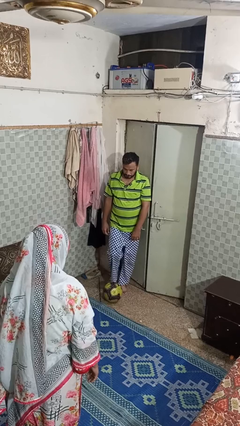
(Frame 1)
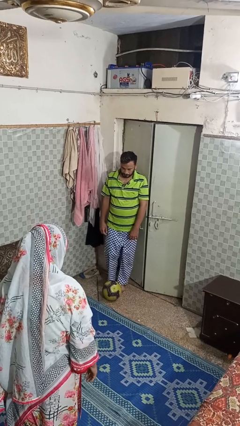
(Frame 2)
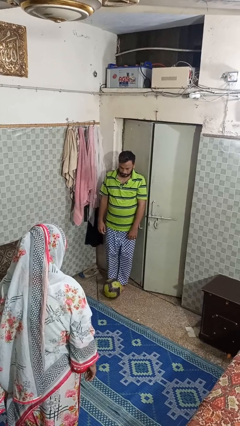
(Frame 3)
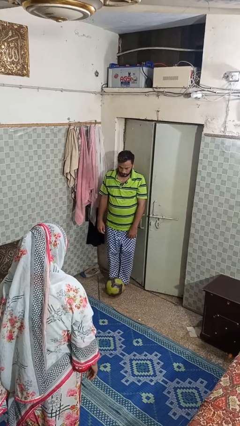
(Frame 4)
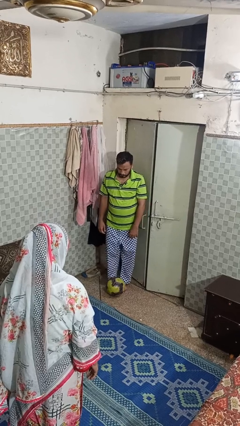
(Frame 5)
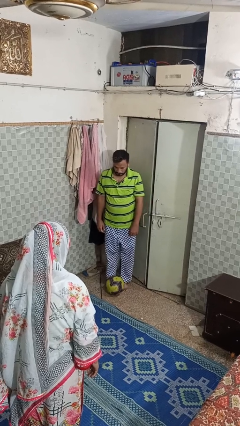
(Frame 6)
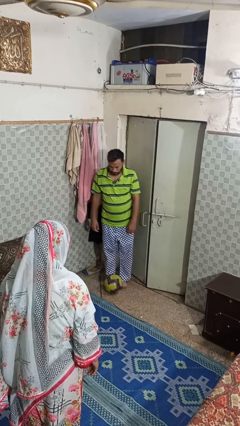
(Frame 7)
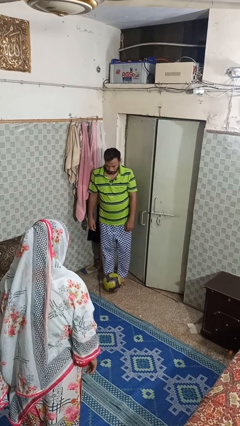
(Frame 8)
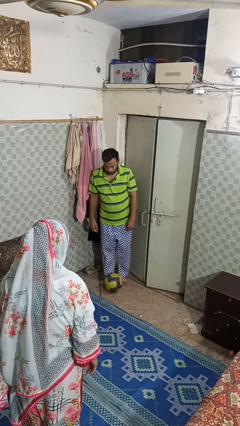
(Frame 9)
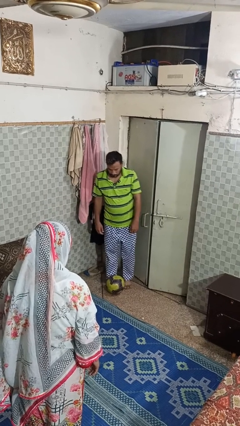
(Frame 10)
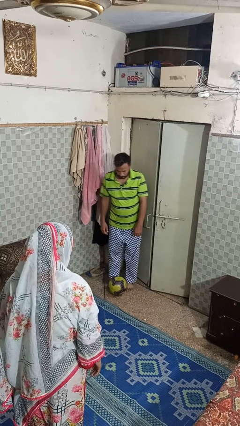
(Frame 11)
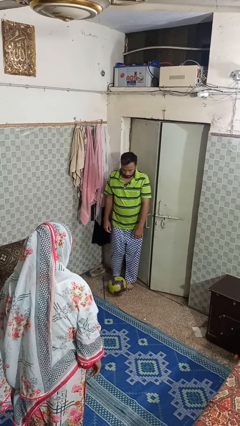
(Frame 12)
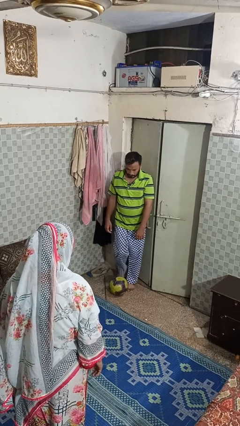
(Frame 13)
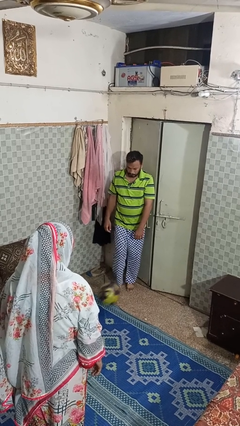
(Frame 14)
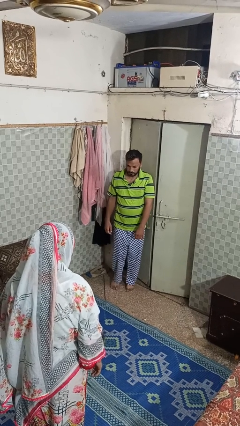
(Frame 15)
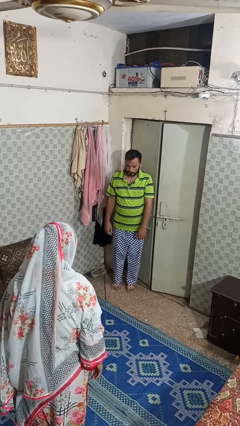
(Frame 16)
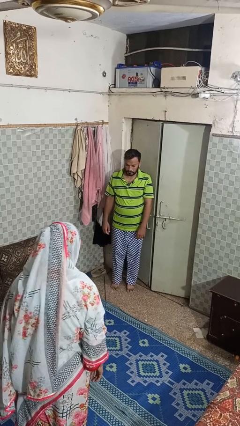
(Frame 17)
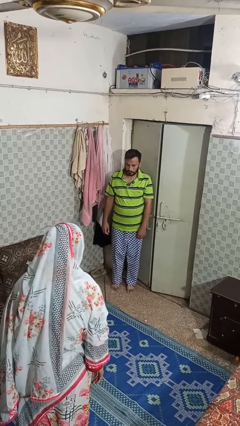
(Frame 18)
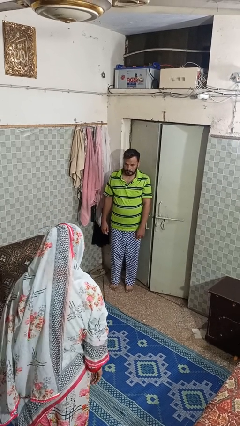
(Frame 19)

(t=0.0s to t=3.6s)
person kicks object to person

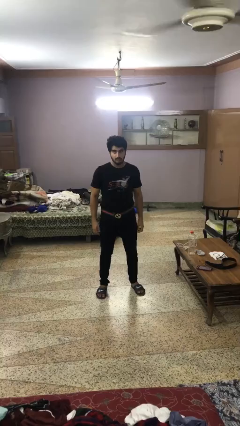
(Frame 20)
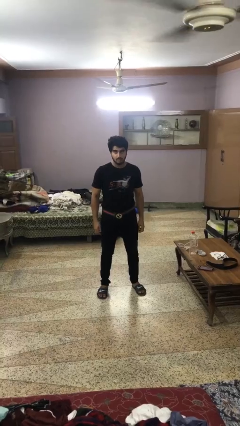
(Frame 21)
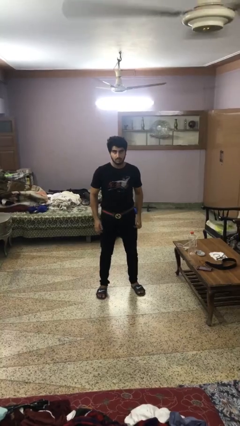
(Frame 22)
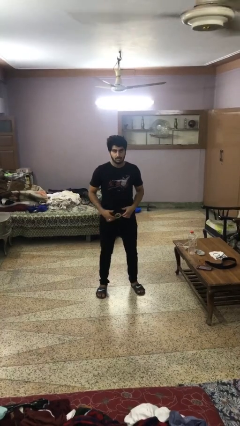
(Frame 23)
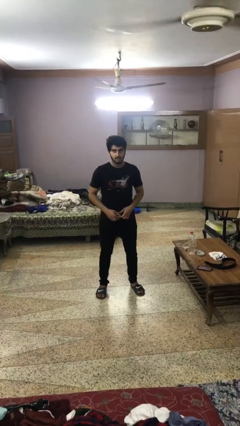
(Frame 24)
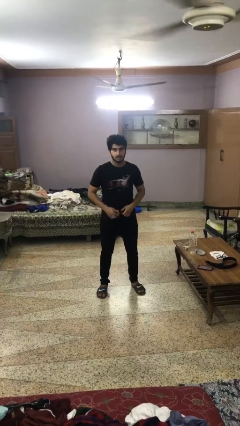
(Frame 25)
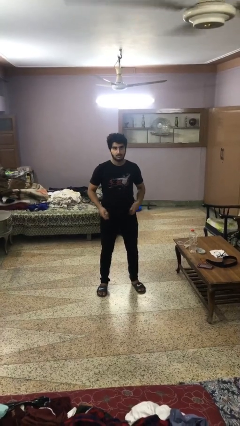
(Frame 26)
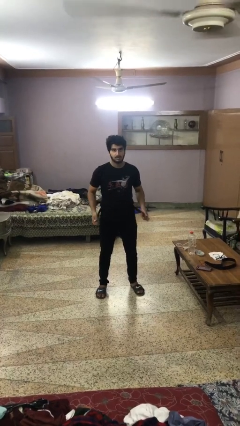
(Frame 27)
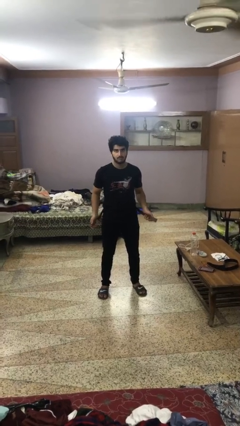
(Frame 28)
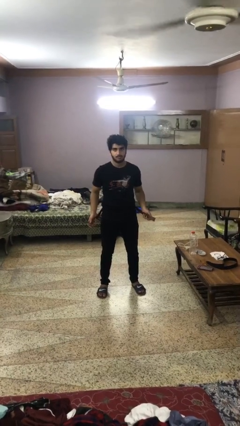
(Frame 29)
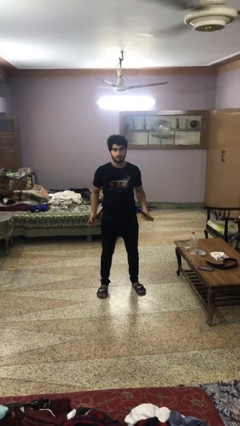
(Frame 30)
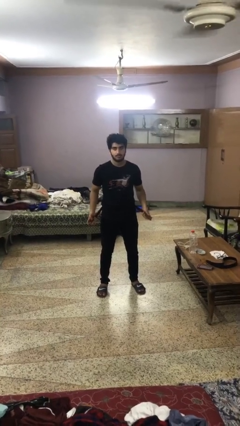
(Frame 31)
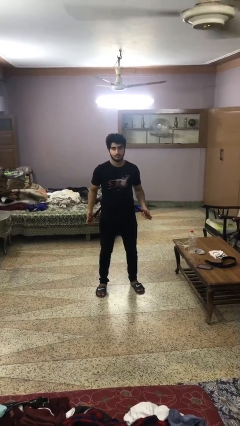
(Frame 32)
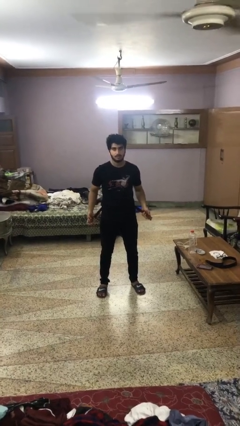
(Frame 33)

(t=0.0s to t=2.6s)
person takes off belt

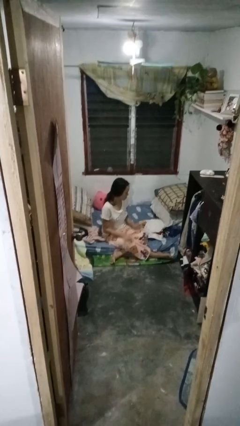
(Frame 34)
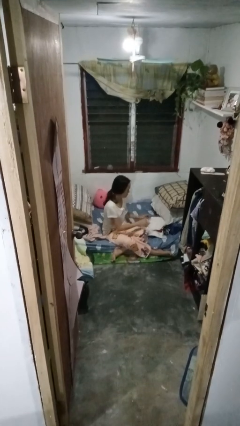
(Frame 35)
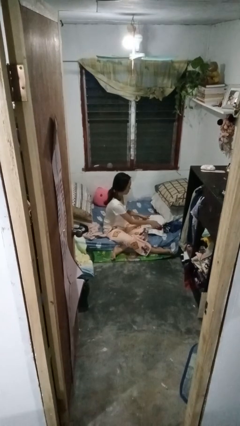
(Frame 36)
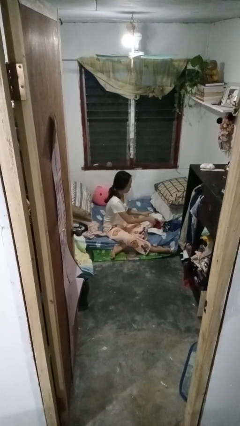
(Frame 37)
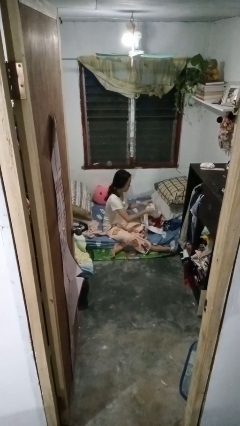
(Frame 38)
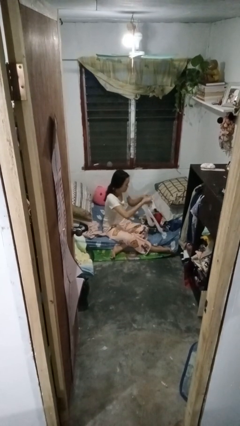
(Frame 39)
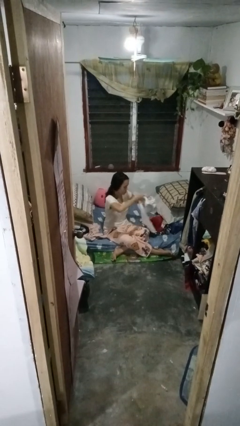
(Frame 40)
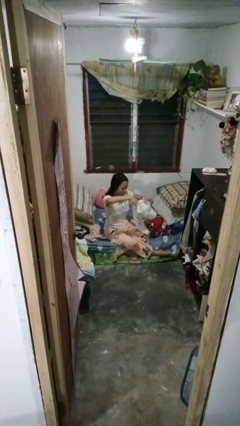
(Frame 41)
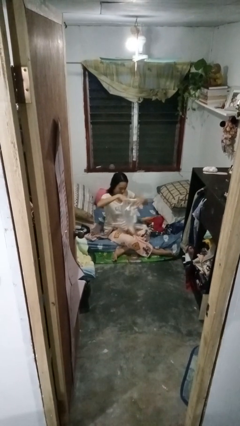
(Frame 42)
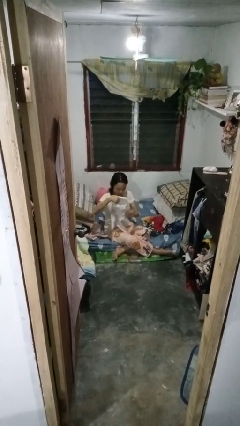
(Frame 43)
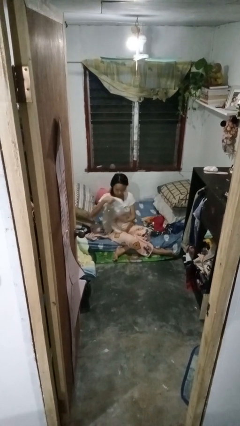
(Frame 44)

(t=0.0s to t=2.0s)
person folds shirt

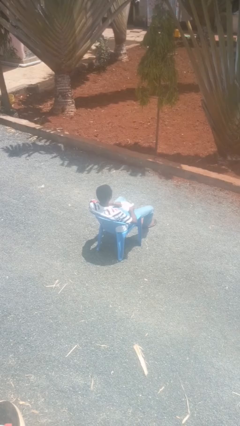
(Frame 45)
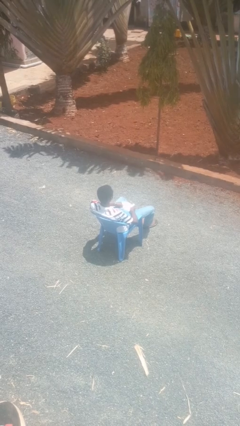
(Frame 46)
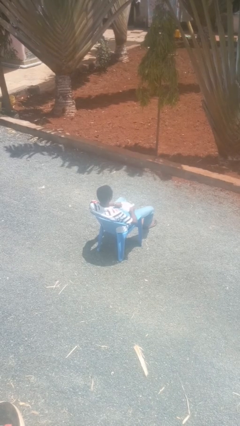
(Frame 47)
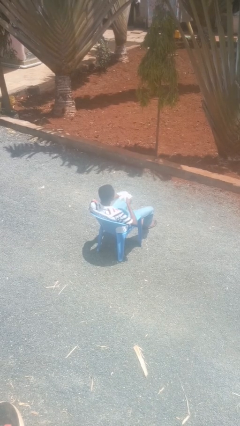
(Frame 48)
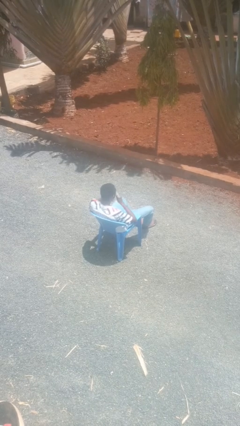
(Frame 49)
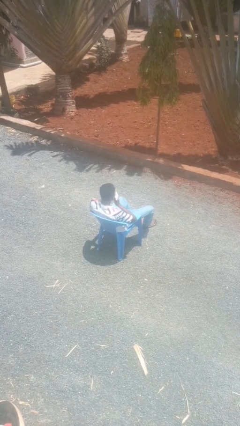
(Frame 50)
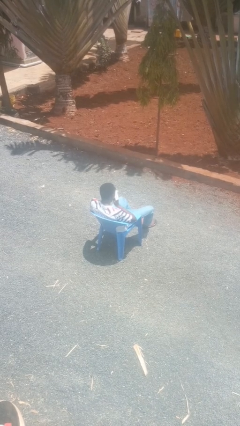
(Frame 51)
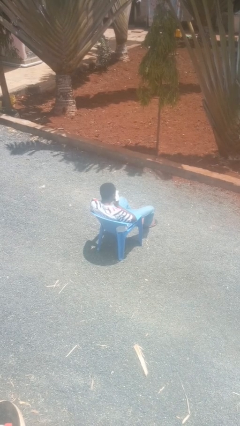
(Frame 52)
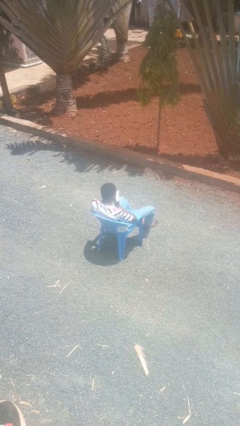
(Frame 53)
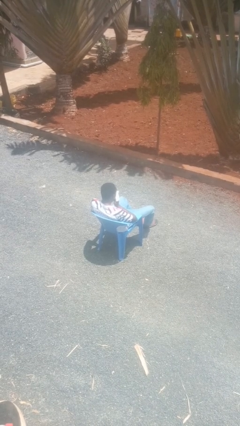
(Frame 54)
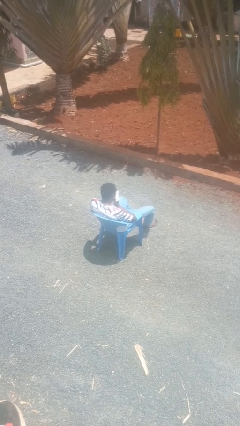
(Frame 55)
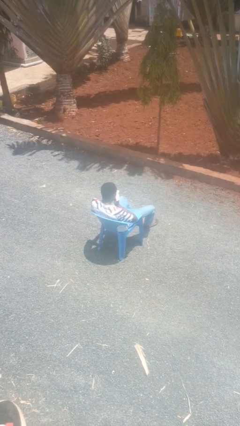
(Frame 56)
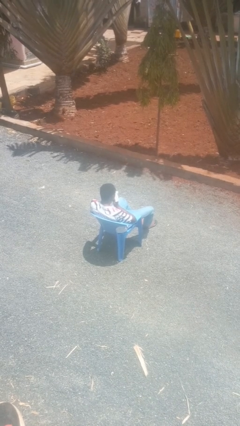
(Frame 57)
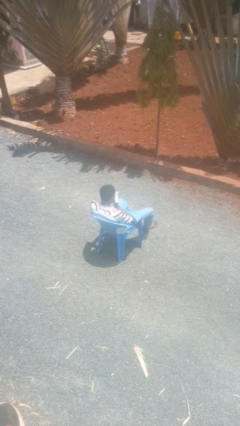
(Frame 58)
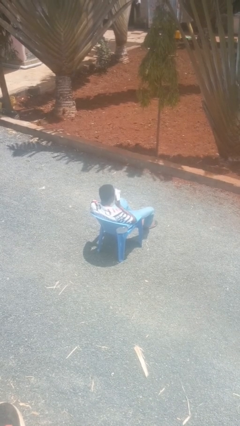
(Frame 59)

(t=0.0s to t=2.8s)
person blows nose

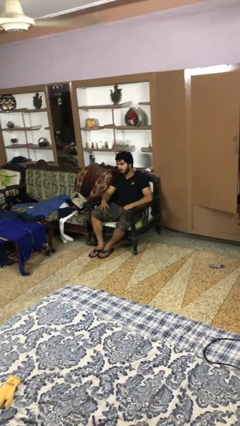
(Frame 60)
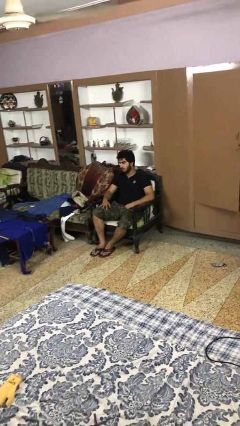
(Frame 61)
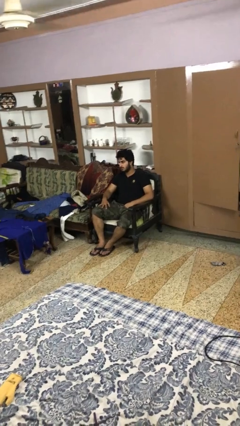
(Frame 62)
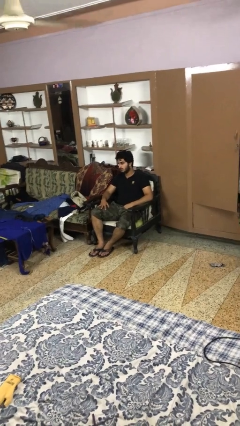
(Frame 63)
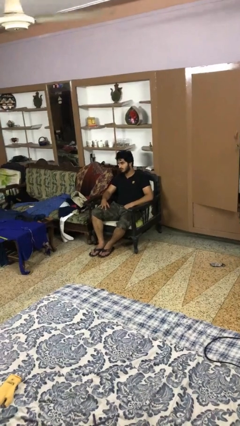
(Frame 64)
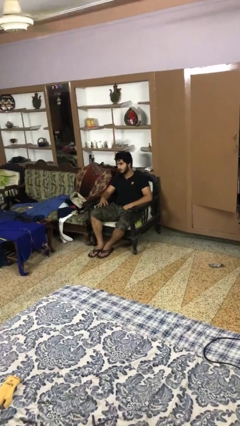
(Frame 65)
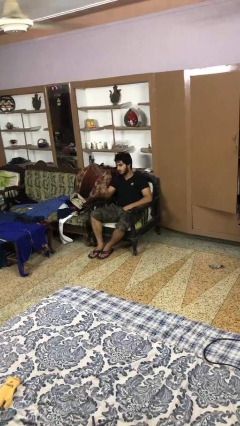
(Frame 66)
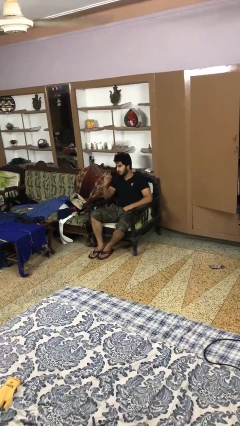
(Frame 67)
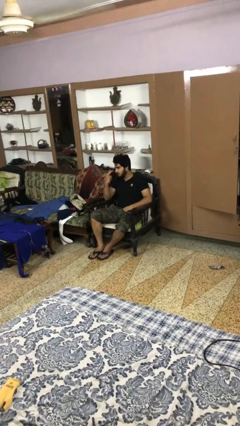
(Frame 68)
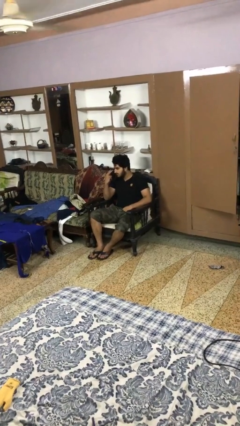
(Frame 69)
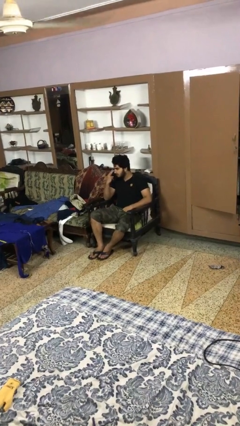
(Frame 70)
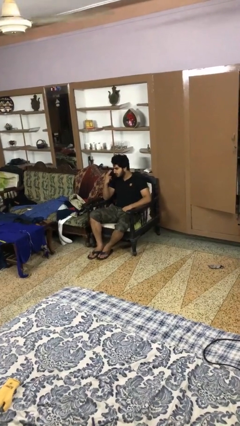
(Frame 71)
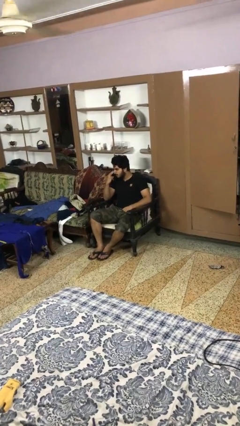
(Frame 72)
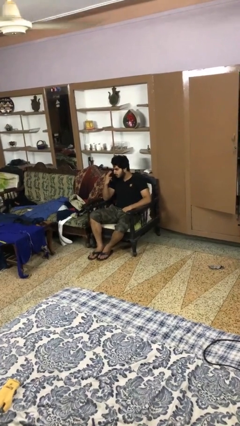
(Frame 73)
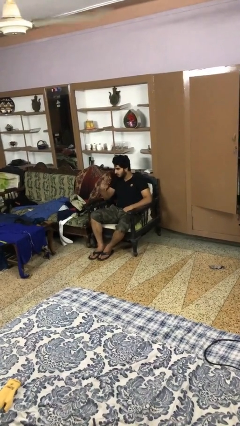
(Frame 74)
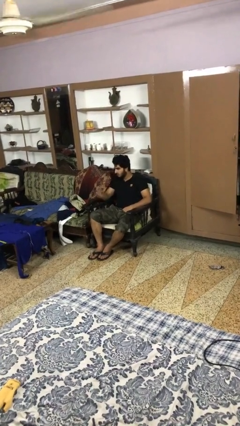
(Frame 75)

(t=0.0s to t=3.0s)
person gestures watch closely

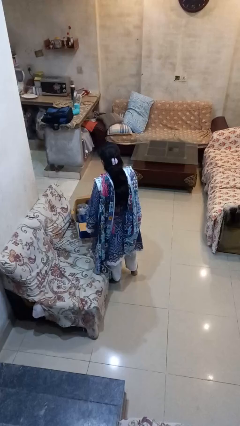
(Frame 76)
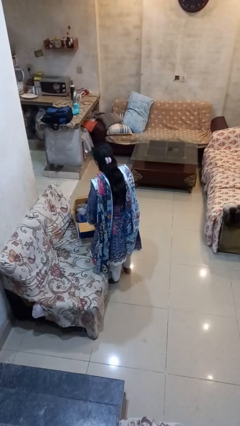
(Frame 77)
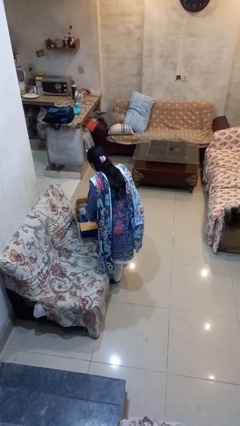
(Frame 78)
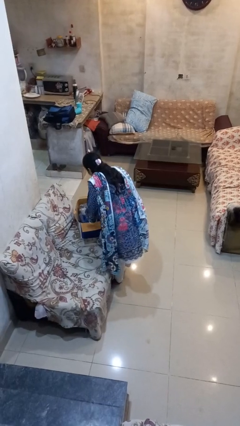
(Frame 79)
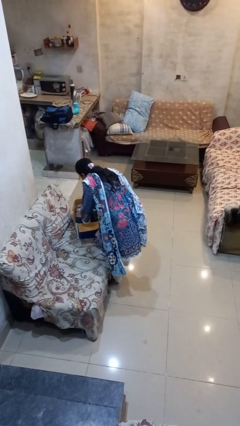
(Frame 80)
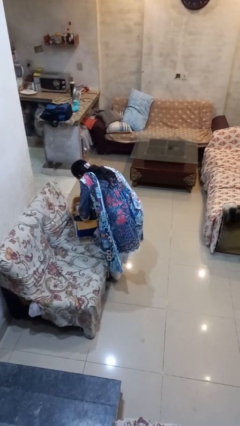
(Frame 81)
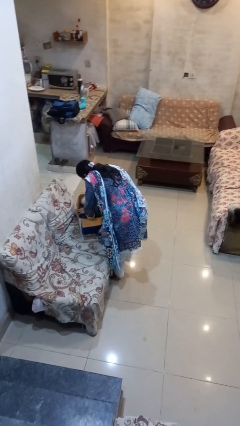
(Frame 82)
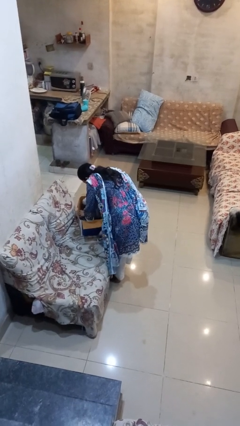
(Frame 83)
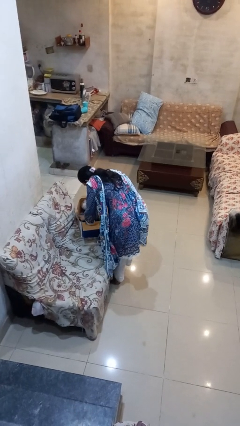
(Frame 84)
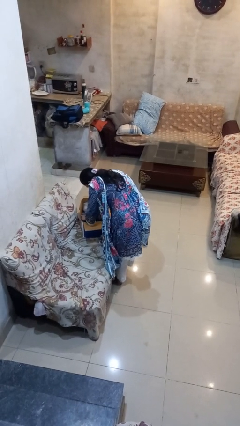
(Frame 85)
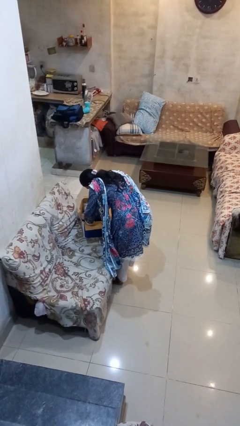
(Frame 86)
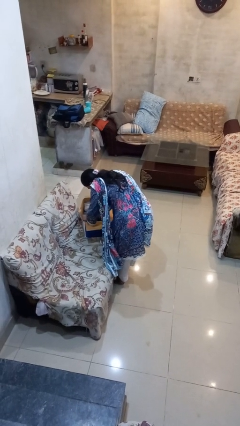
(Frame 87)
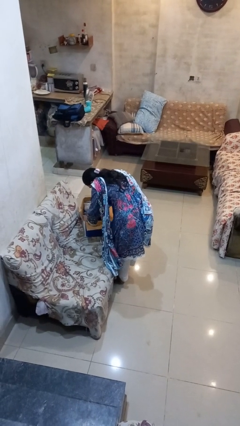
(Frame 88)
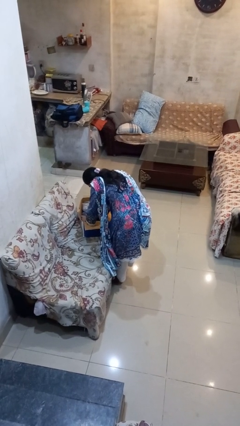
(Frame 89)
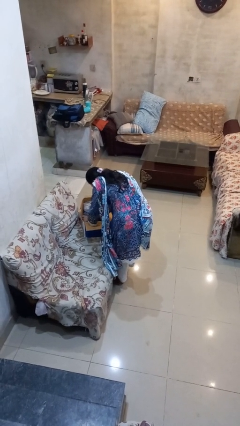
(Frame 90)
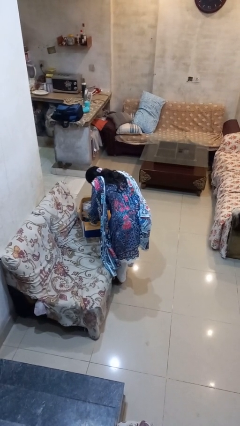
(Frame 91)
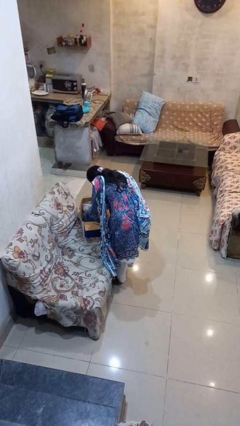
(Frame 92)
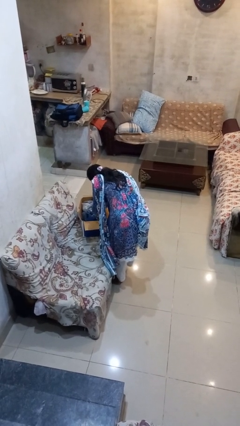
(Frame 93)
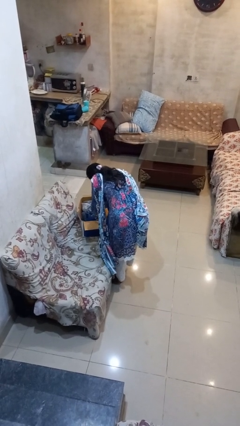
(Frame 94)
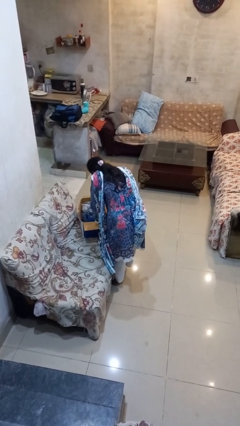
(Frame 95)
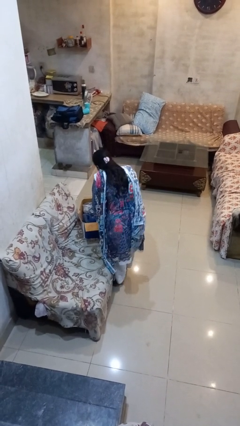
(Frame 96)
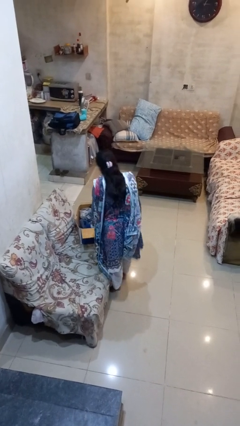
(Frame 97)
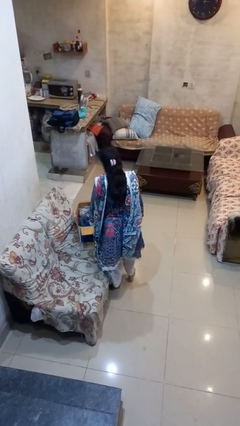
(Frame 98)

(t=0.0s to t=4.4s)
person searches in box
